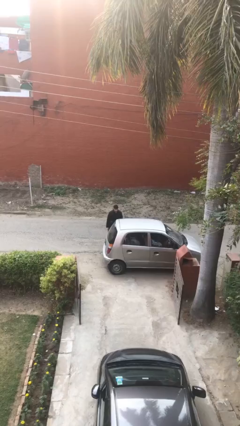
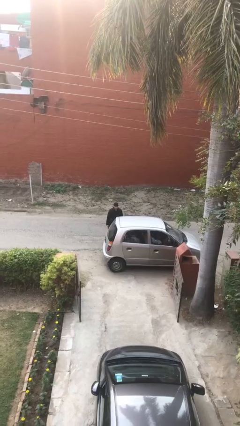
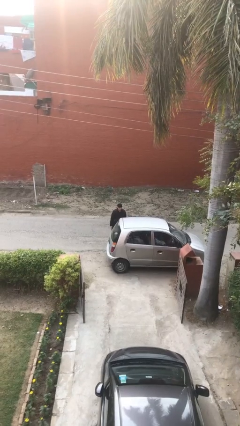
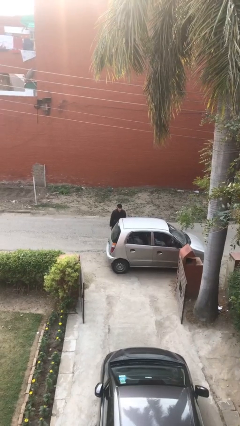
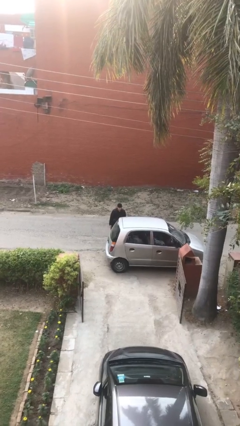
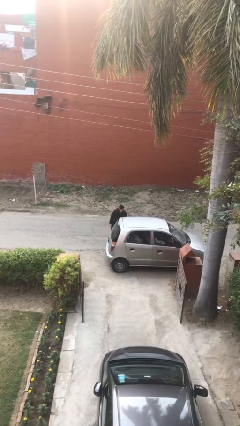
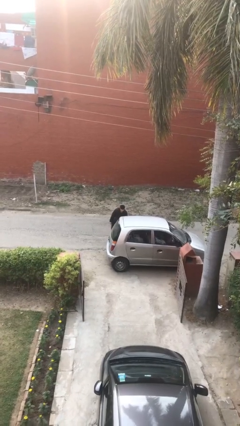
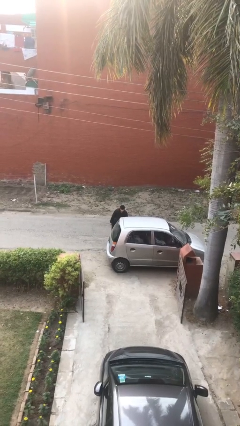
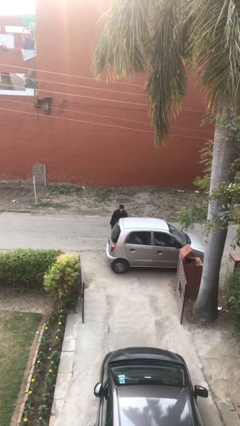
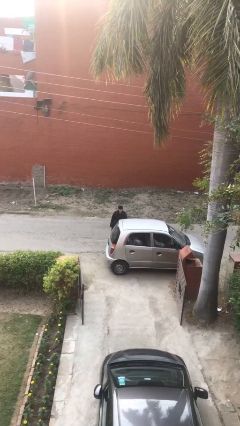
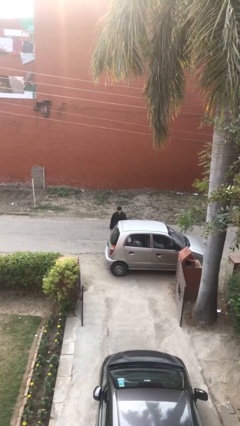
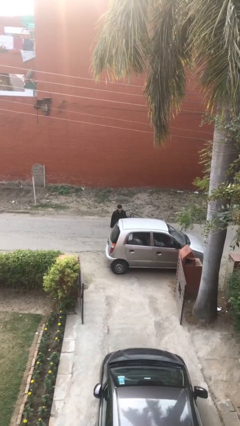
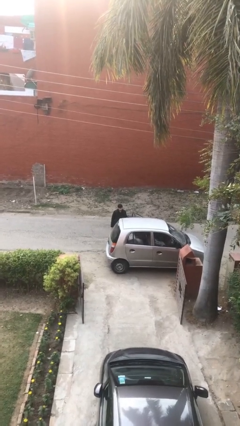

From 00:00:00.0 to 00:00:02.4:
person opens car door

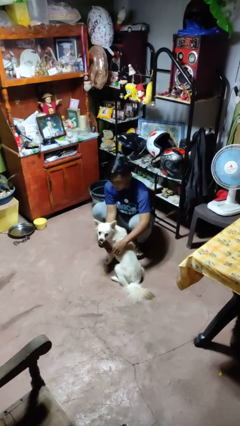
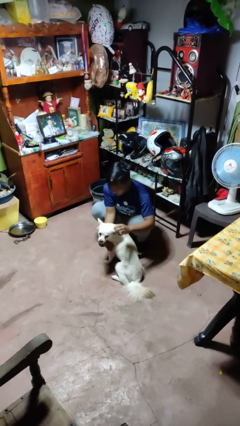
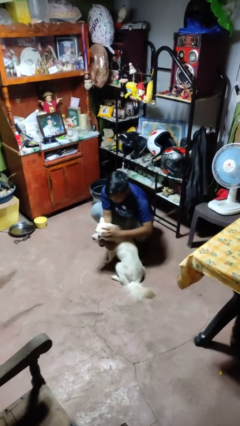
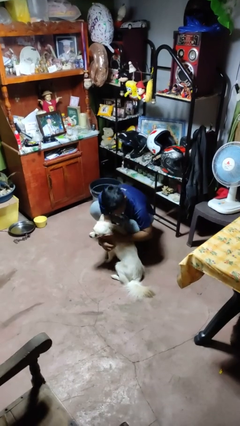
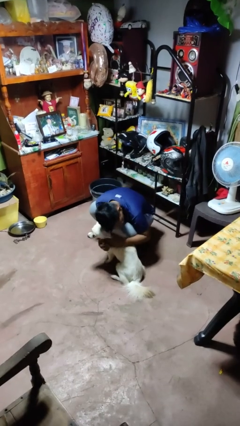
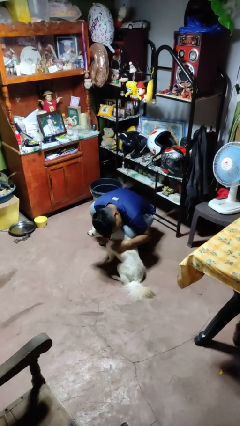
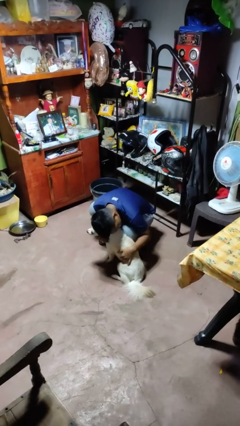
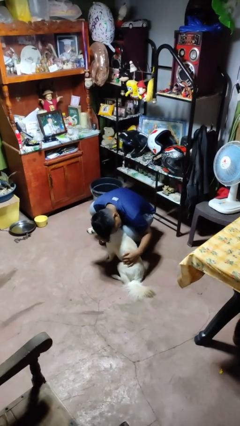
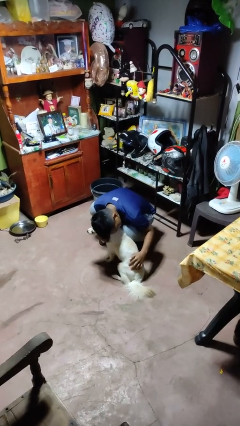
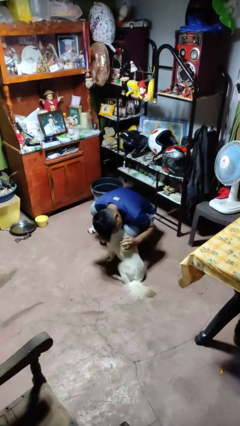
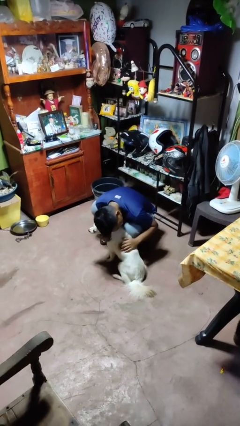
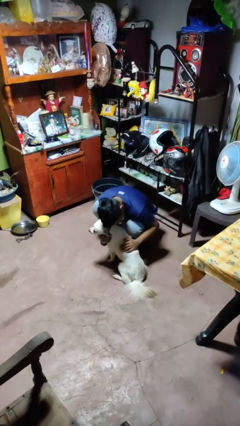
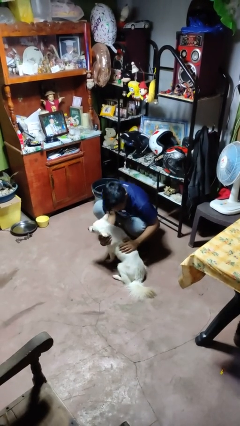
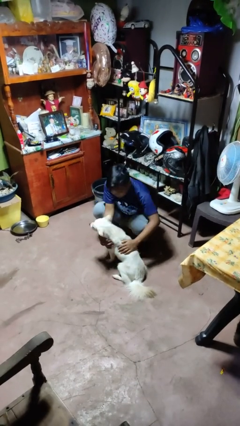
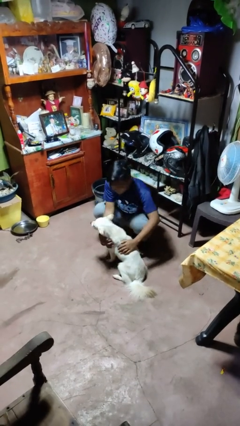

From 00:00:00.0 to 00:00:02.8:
person hugs dog

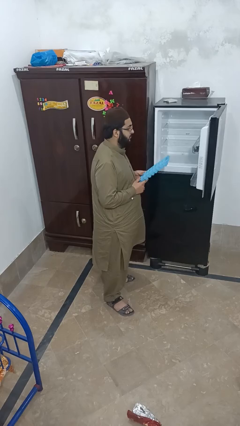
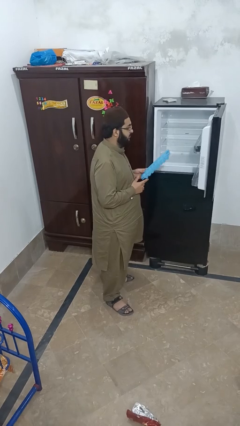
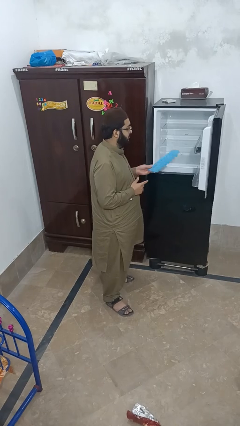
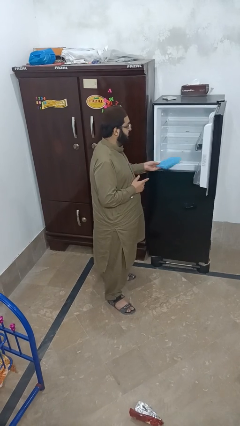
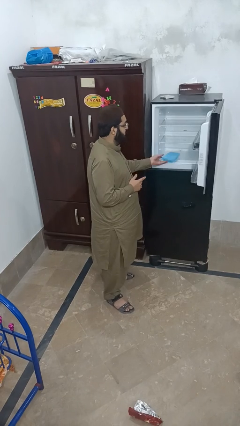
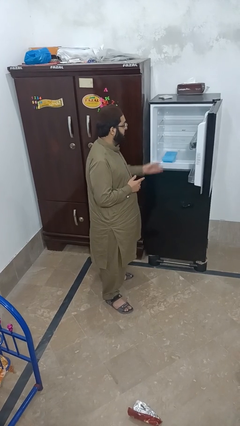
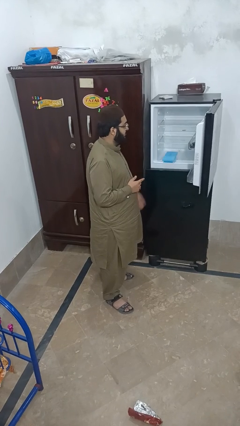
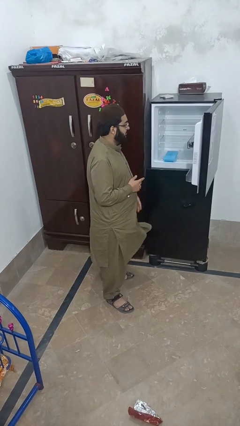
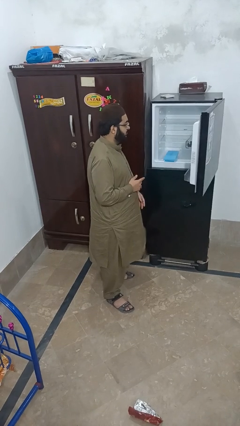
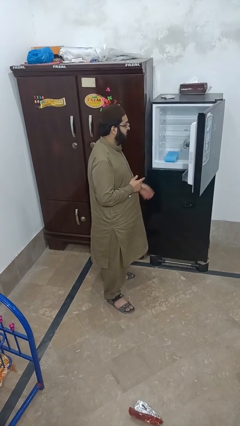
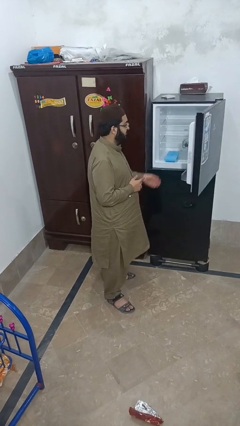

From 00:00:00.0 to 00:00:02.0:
person puts object into refrigerator

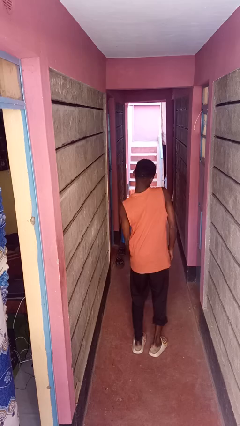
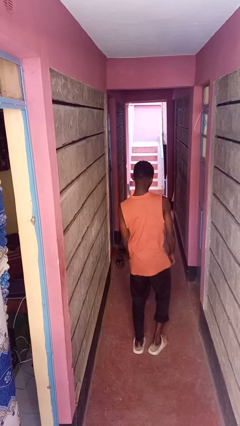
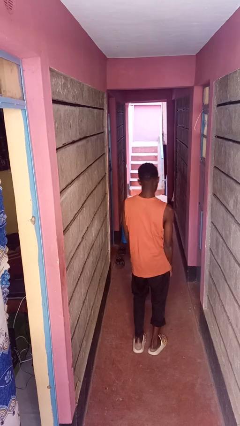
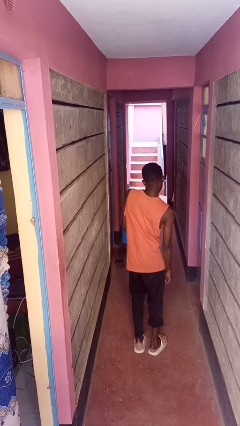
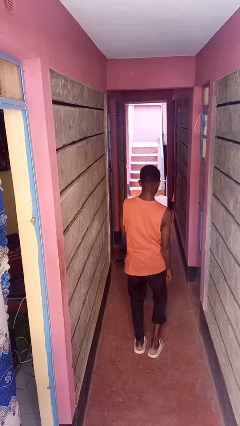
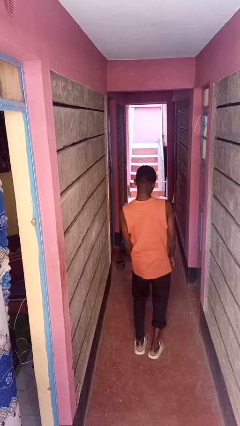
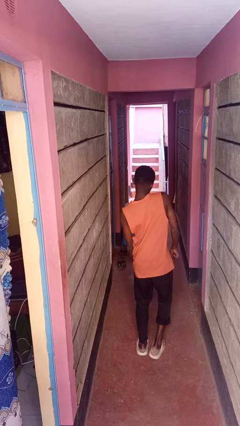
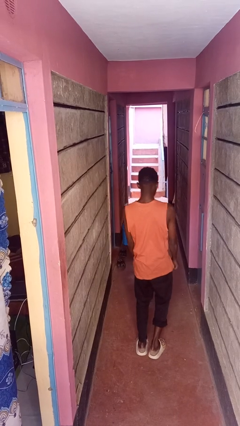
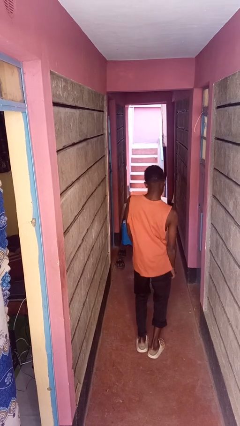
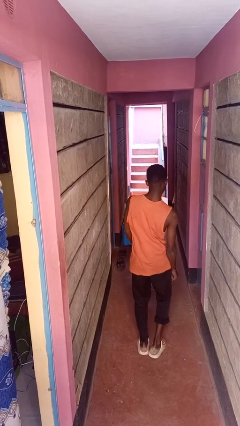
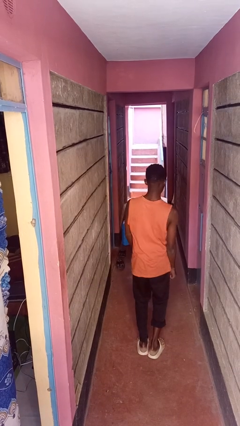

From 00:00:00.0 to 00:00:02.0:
person dances in place

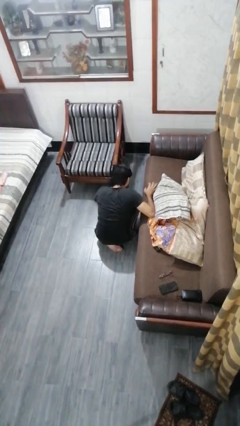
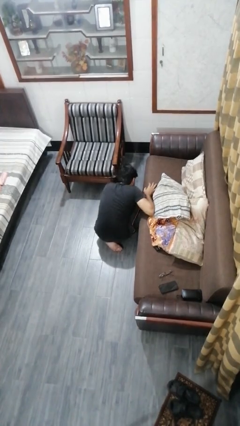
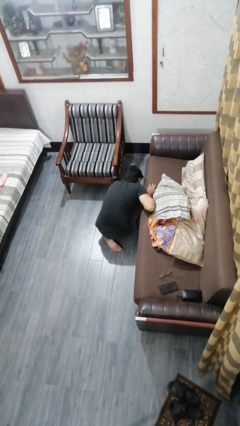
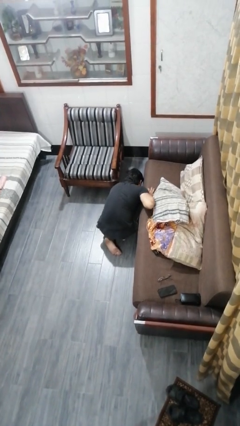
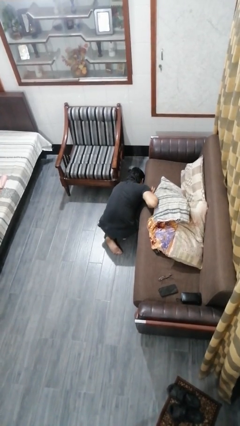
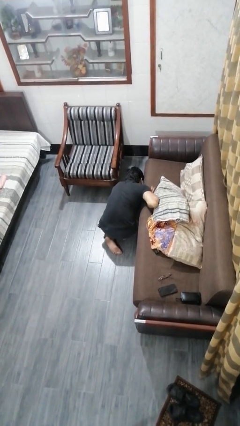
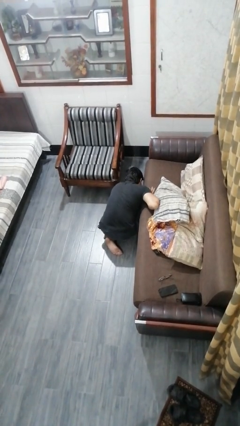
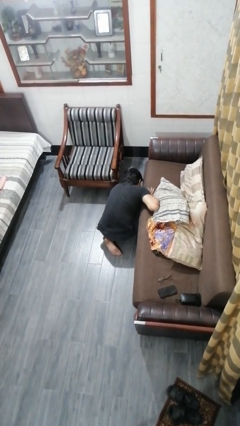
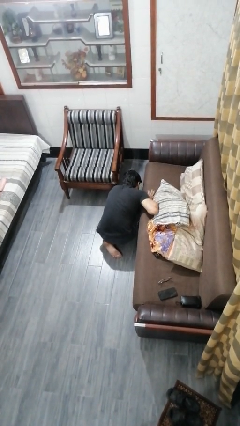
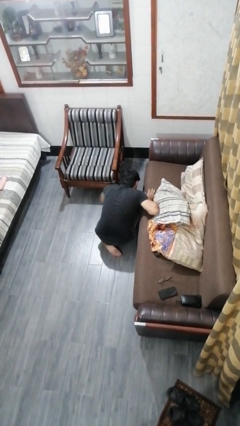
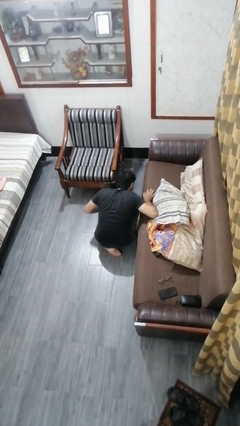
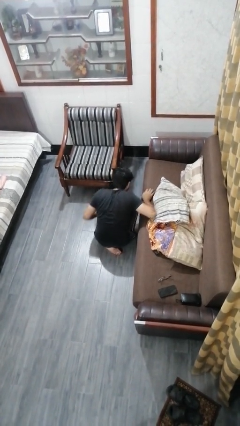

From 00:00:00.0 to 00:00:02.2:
person searches under couch

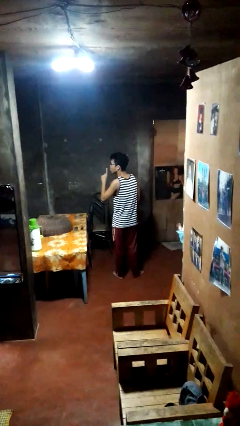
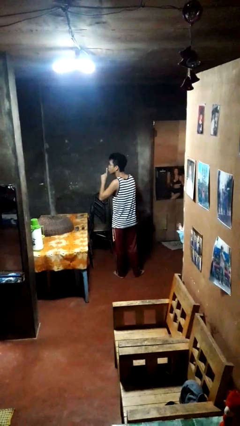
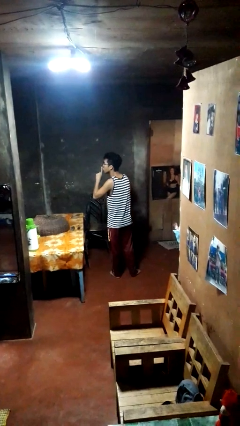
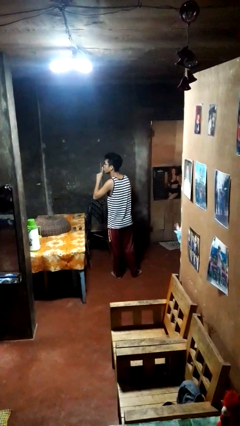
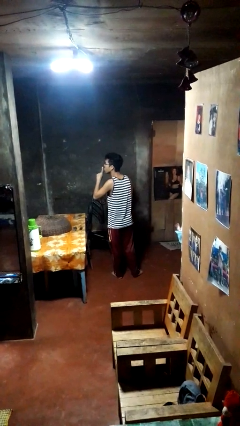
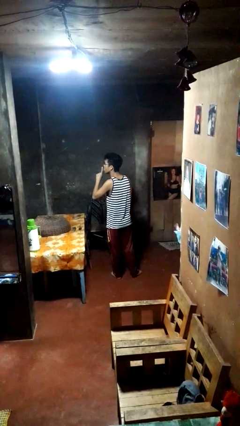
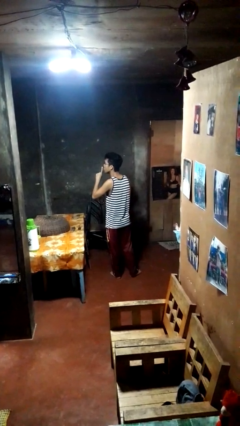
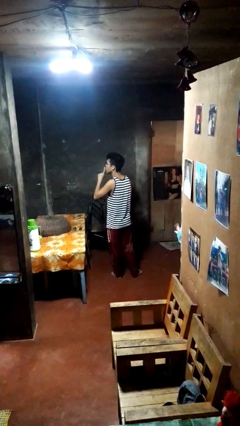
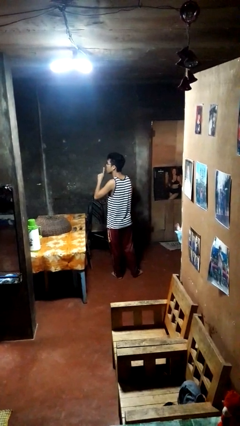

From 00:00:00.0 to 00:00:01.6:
person gestures be quiet

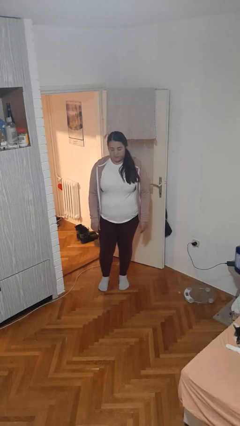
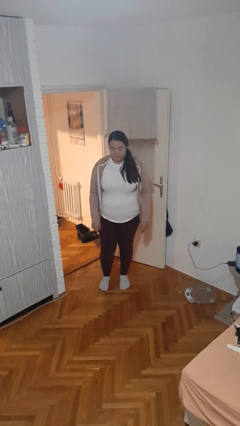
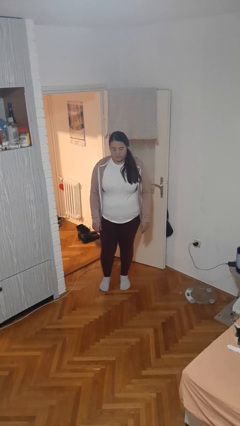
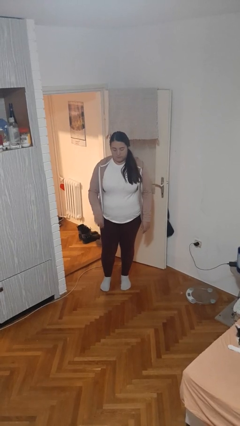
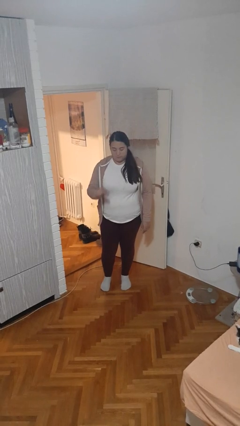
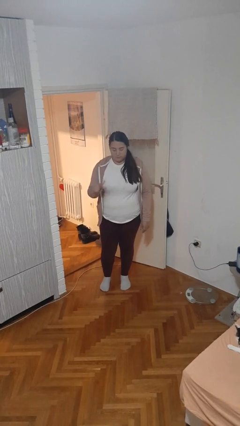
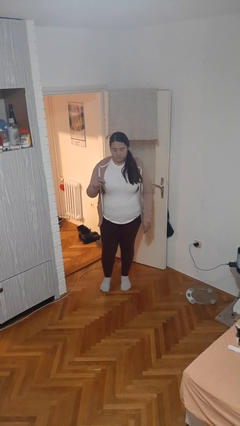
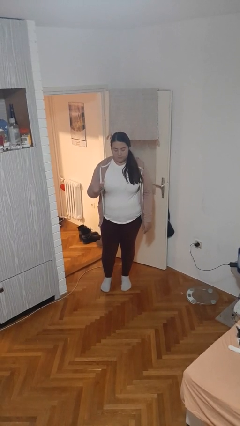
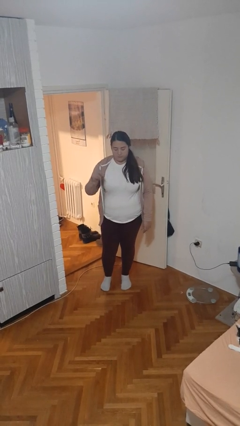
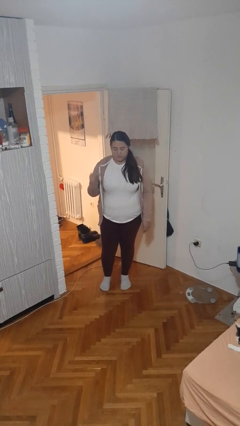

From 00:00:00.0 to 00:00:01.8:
person snaps fingers

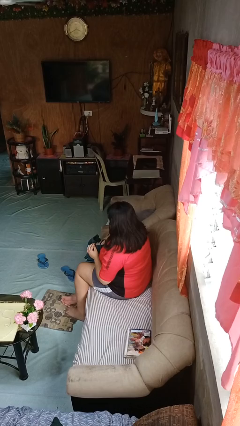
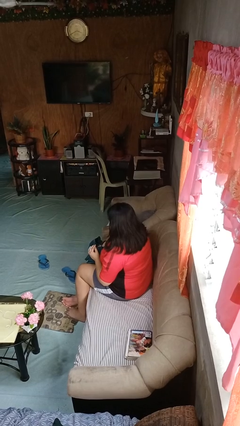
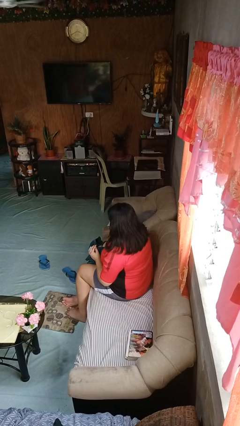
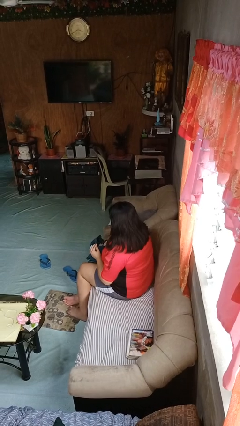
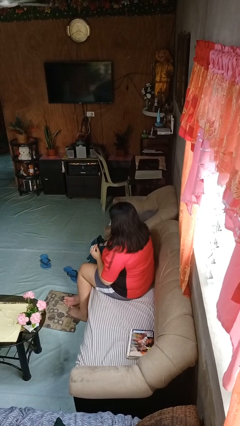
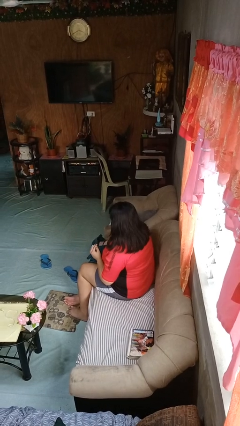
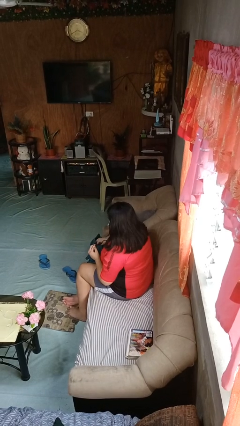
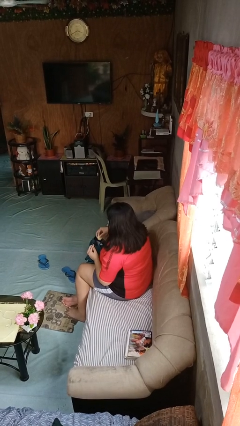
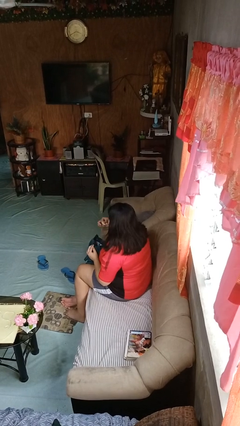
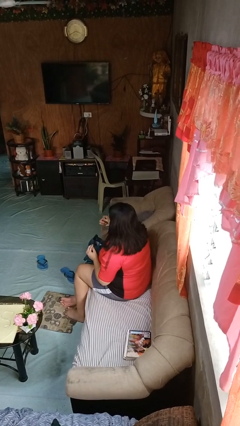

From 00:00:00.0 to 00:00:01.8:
person eats snack from bag
